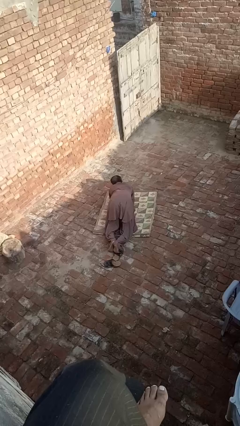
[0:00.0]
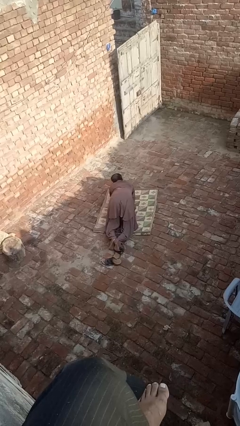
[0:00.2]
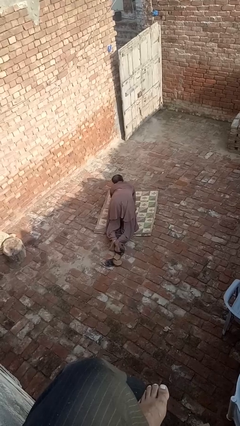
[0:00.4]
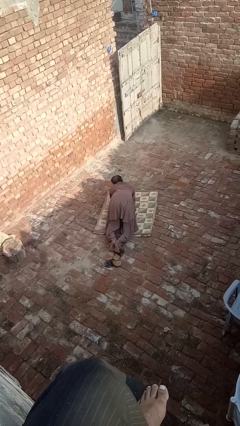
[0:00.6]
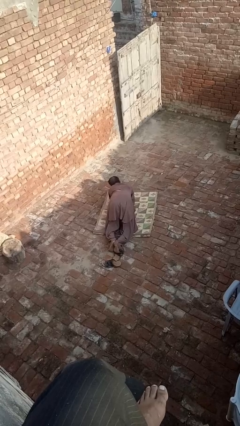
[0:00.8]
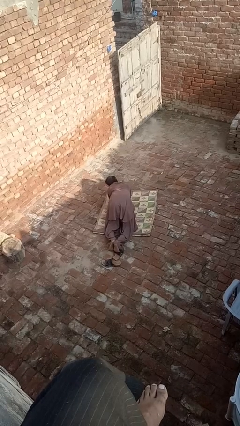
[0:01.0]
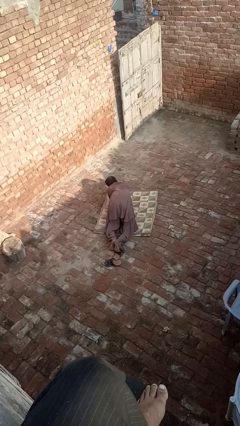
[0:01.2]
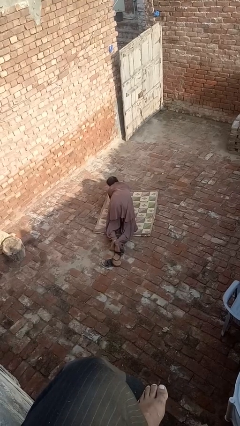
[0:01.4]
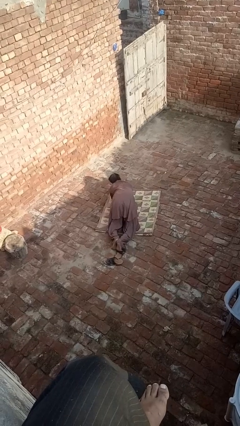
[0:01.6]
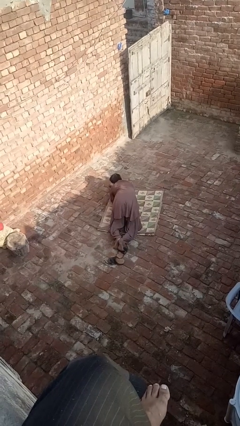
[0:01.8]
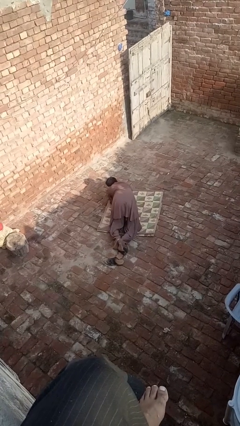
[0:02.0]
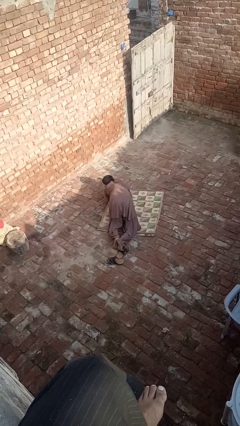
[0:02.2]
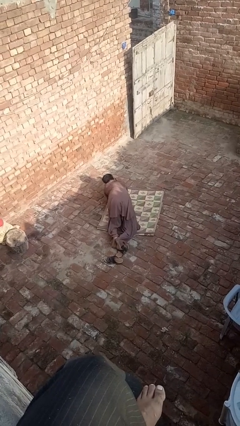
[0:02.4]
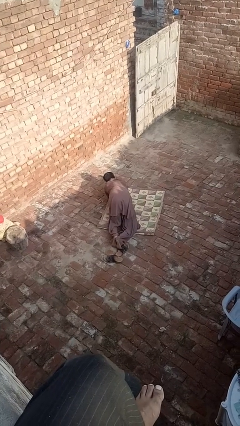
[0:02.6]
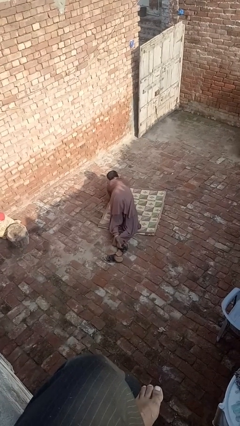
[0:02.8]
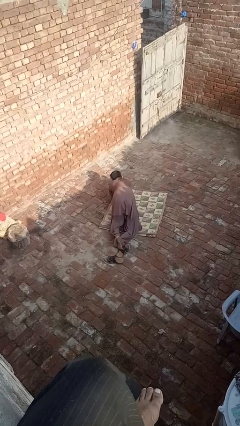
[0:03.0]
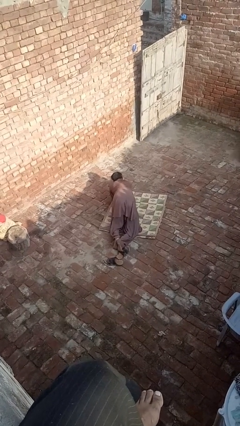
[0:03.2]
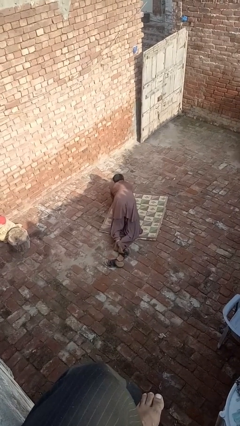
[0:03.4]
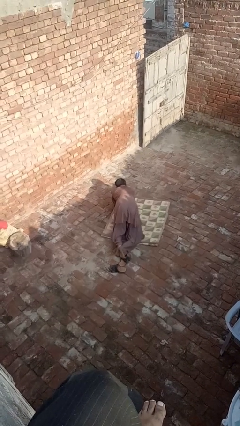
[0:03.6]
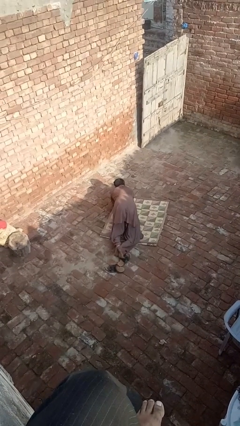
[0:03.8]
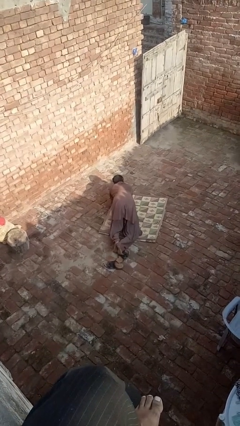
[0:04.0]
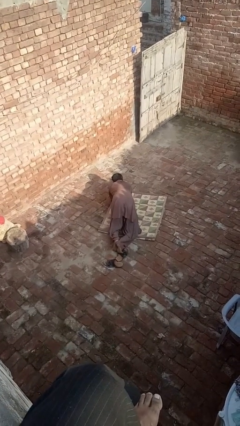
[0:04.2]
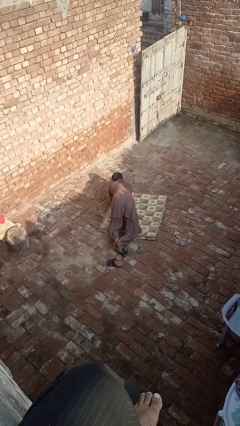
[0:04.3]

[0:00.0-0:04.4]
person crawls

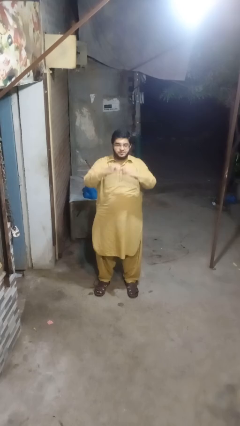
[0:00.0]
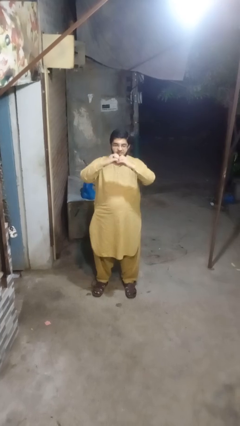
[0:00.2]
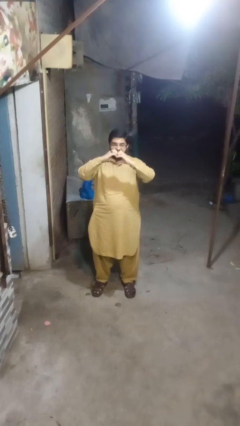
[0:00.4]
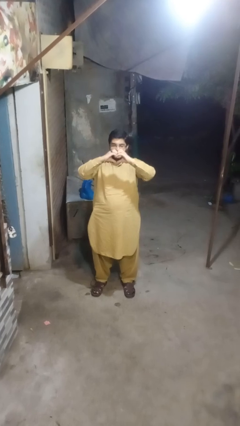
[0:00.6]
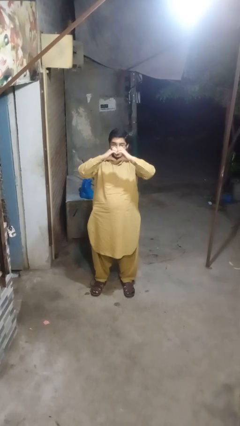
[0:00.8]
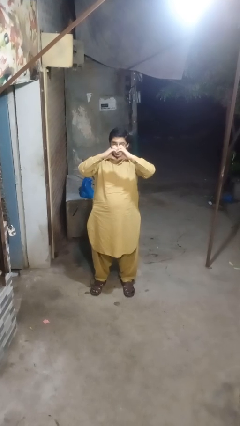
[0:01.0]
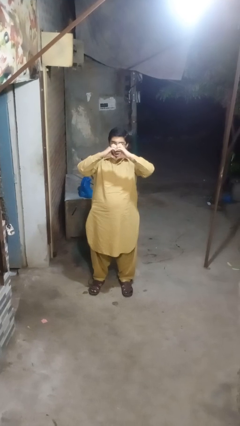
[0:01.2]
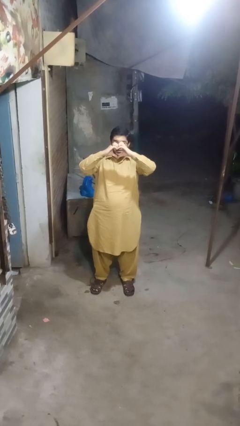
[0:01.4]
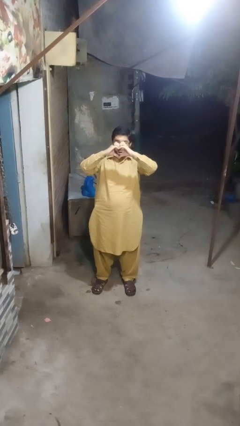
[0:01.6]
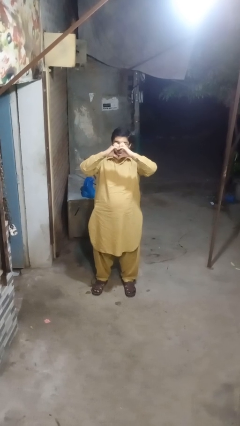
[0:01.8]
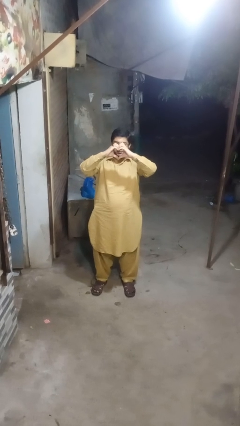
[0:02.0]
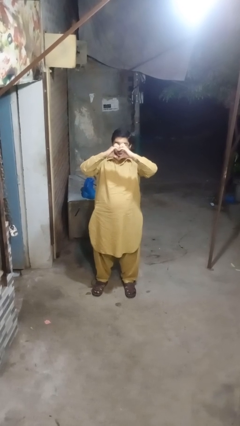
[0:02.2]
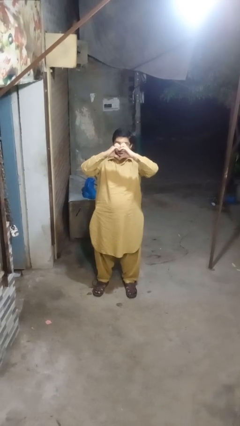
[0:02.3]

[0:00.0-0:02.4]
person gestures heart

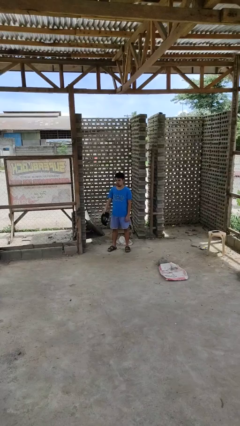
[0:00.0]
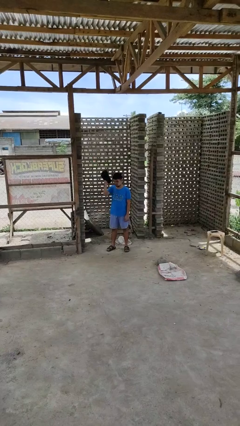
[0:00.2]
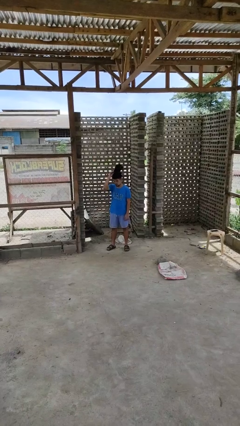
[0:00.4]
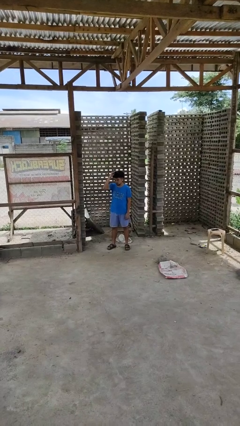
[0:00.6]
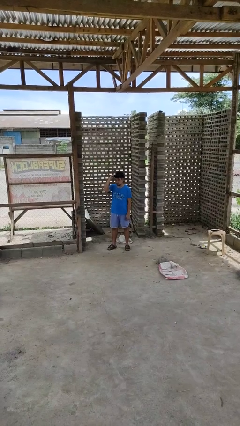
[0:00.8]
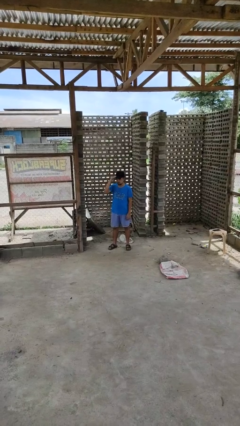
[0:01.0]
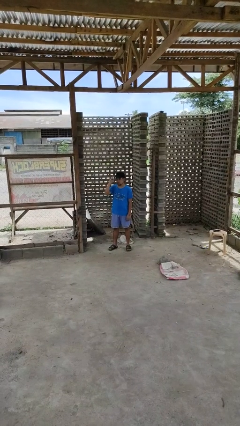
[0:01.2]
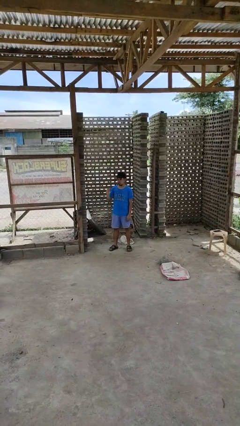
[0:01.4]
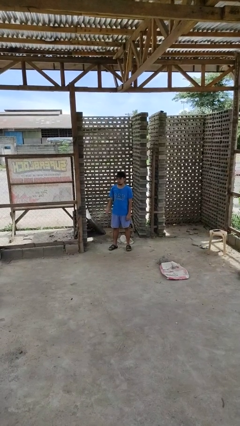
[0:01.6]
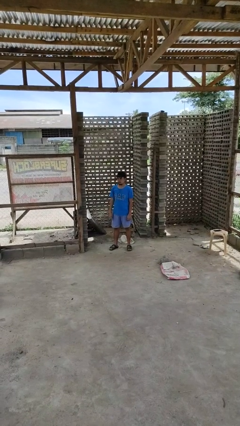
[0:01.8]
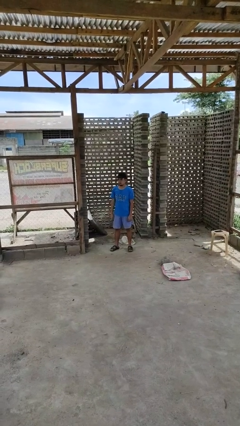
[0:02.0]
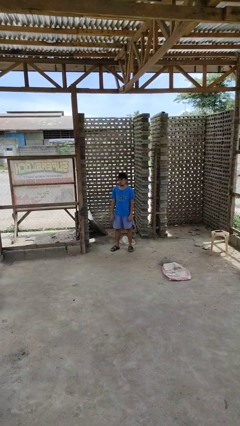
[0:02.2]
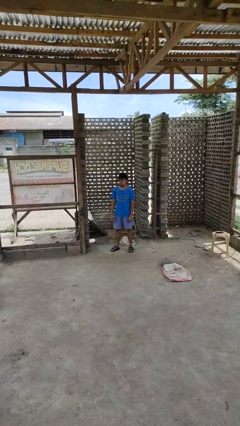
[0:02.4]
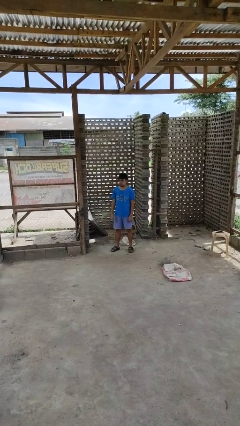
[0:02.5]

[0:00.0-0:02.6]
person puts on hat

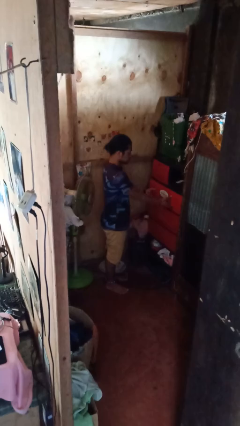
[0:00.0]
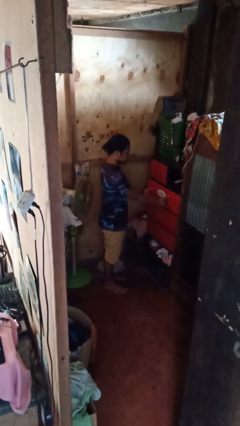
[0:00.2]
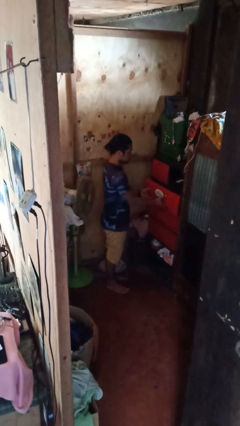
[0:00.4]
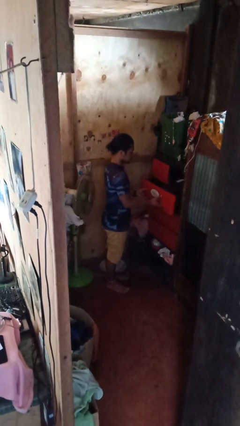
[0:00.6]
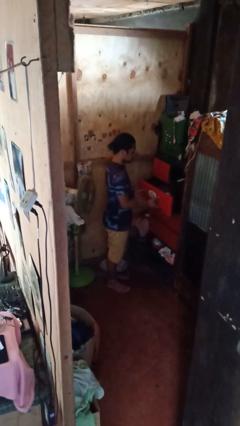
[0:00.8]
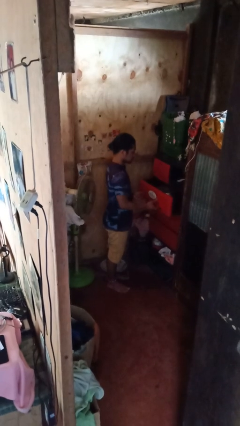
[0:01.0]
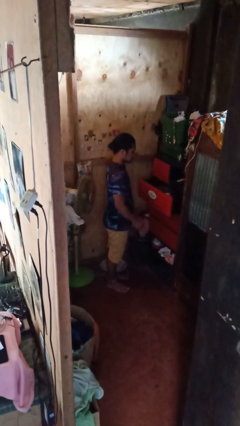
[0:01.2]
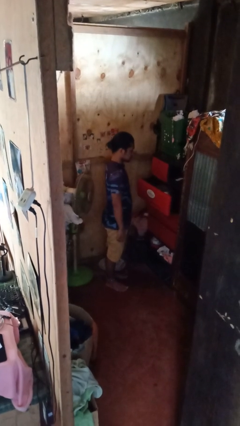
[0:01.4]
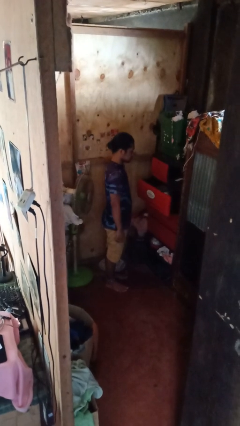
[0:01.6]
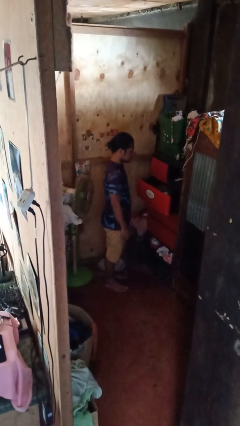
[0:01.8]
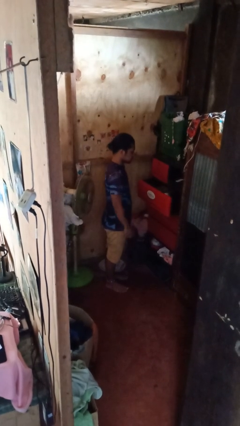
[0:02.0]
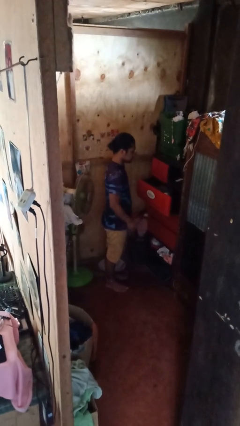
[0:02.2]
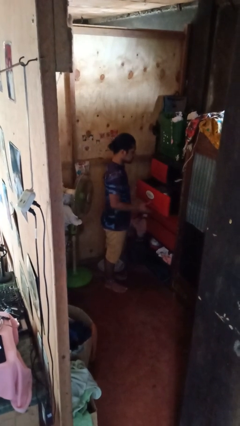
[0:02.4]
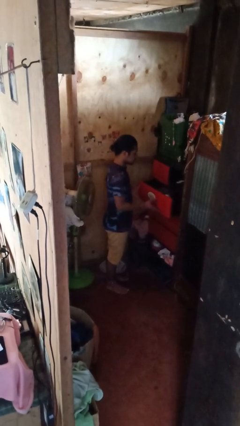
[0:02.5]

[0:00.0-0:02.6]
person opens dresser drawer

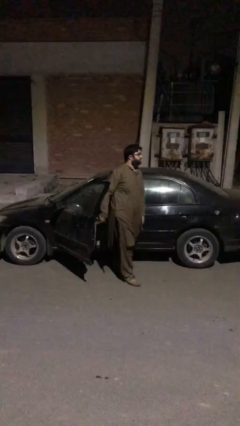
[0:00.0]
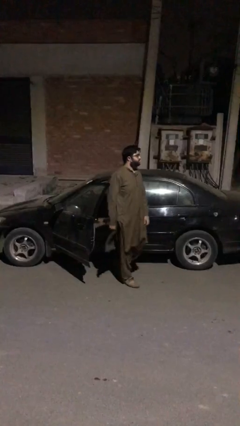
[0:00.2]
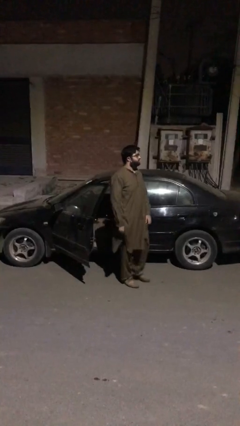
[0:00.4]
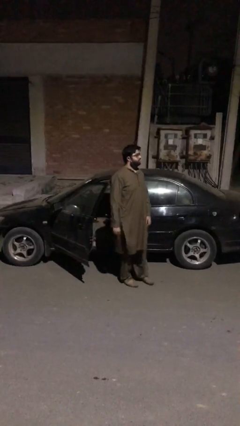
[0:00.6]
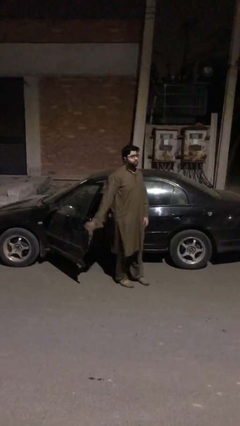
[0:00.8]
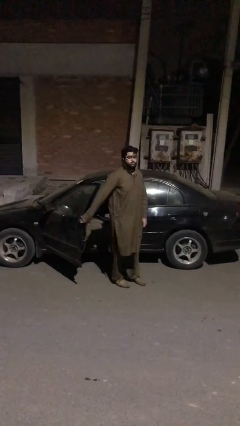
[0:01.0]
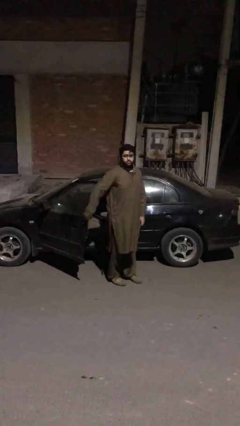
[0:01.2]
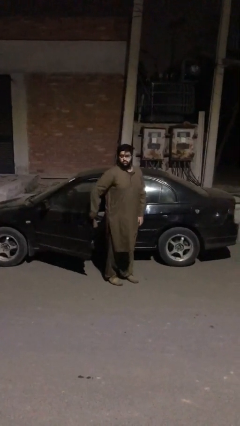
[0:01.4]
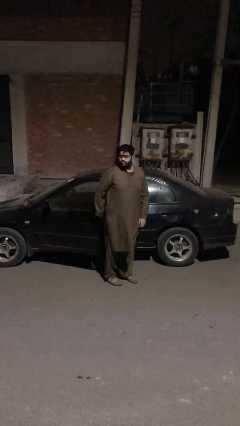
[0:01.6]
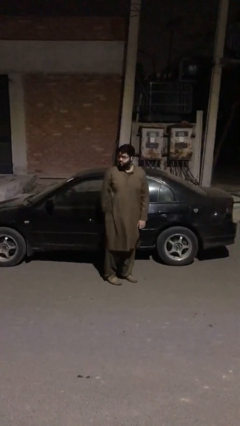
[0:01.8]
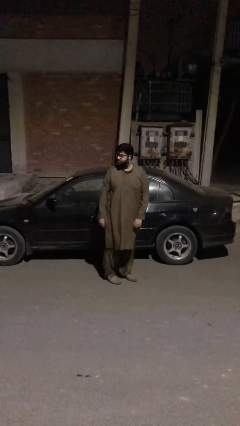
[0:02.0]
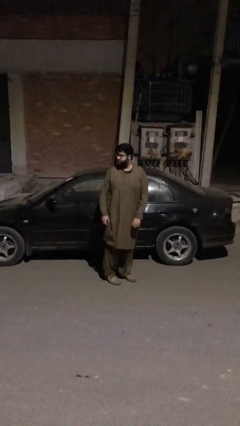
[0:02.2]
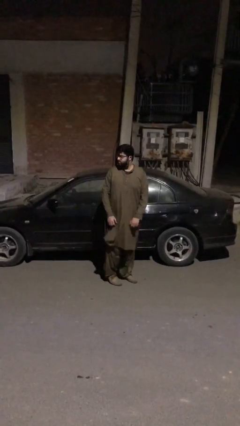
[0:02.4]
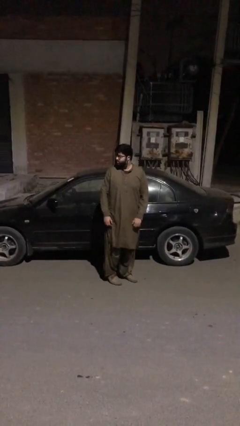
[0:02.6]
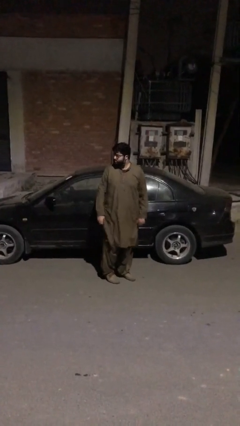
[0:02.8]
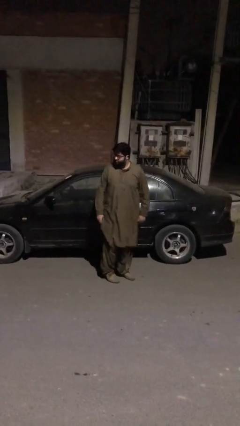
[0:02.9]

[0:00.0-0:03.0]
person closes car door

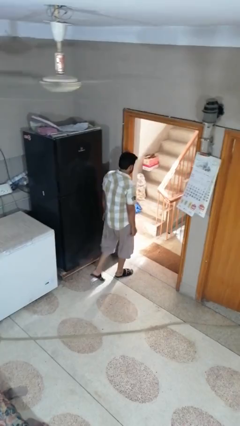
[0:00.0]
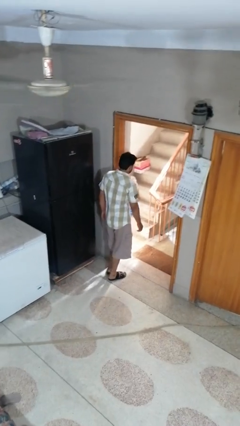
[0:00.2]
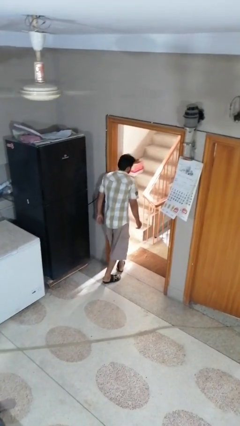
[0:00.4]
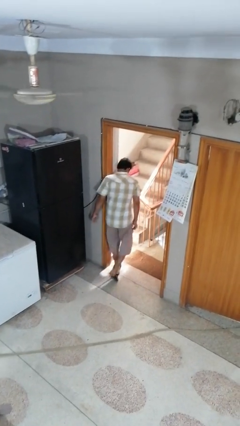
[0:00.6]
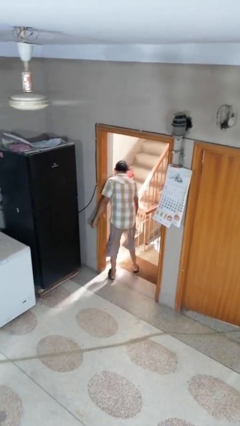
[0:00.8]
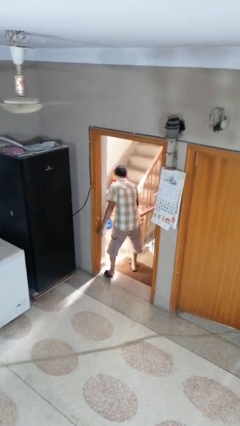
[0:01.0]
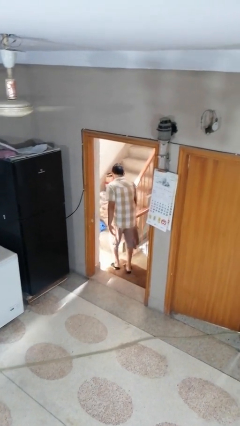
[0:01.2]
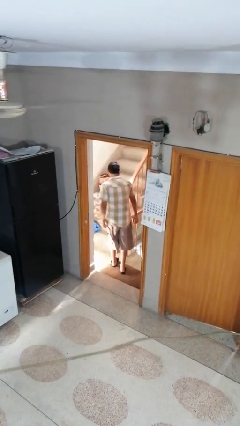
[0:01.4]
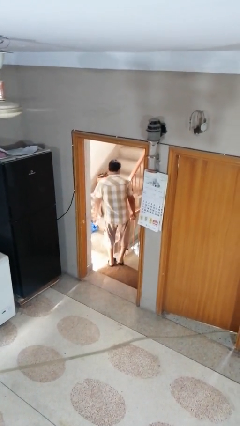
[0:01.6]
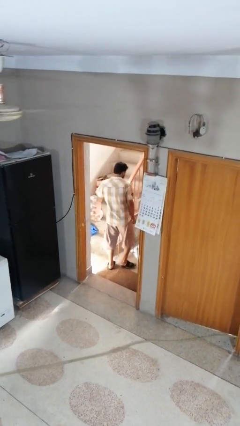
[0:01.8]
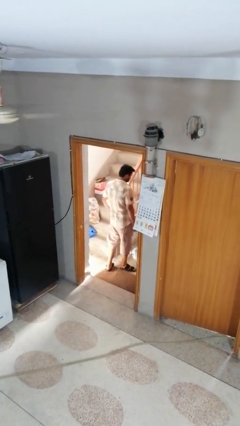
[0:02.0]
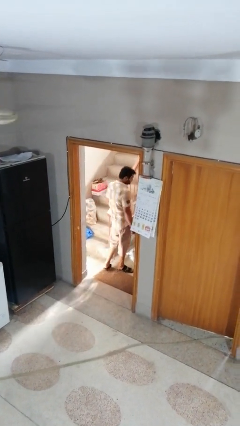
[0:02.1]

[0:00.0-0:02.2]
person bumps into wall

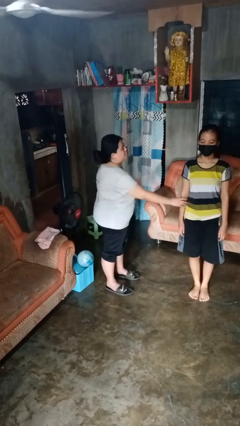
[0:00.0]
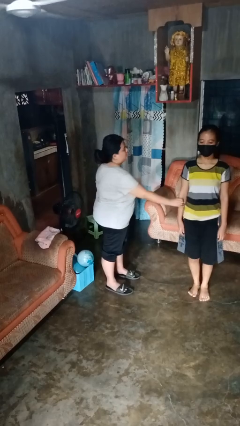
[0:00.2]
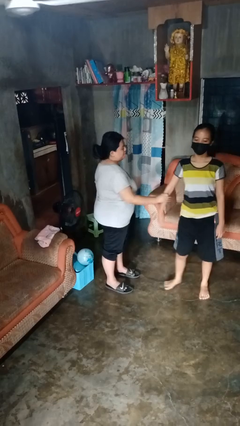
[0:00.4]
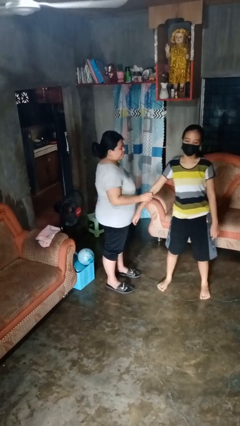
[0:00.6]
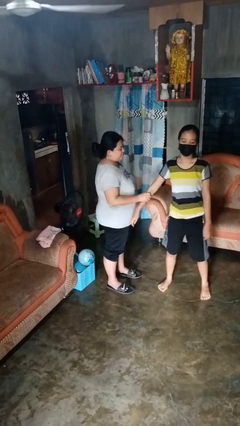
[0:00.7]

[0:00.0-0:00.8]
person grabs person by forearm
